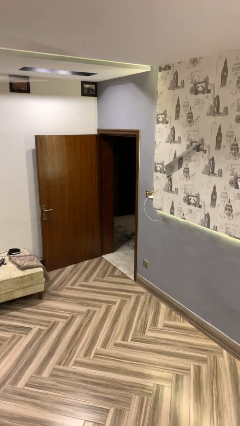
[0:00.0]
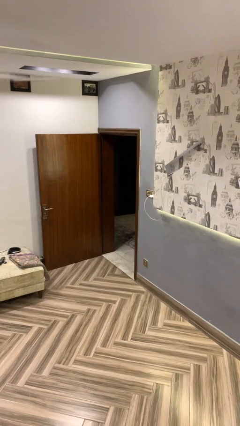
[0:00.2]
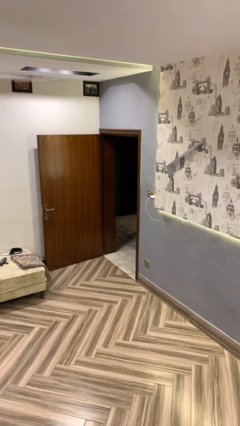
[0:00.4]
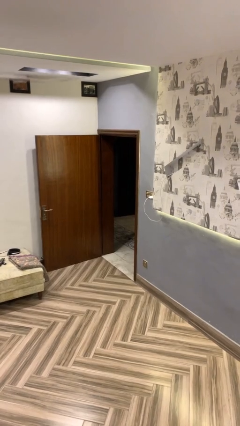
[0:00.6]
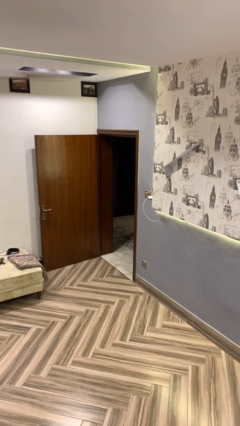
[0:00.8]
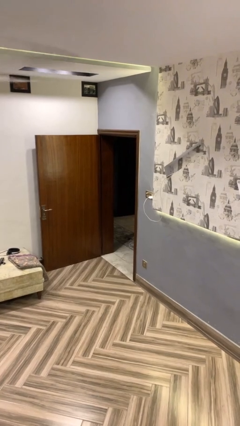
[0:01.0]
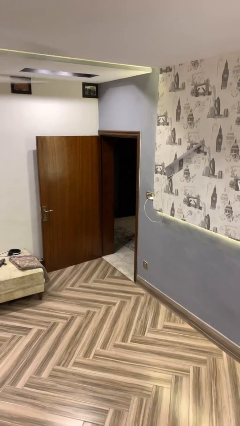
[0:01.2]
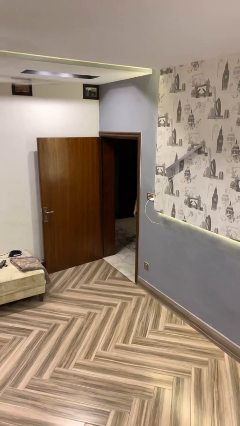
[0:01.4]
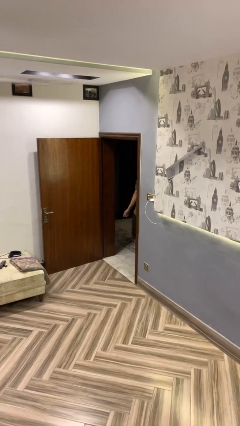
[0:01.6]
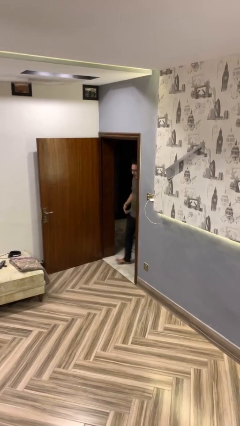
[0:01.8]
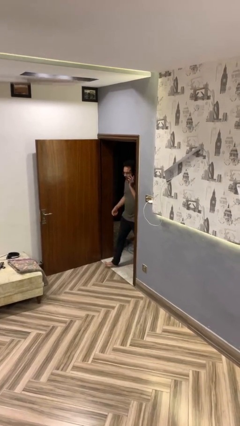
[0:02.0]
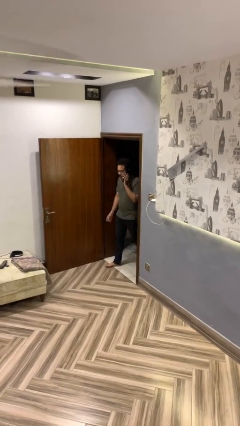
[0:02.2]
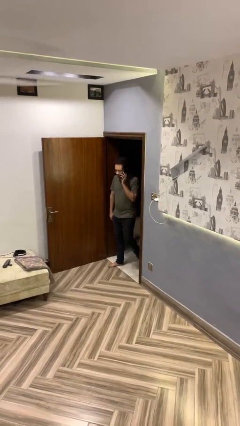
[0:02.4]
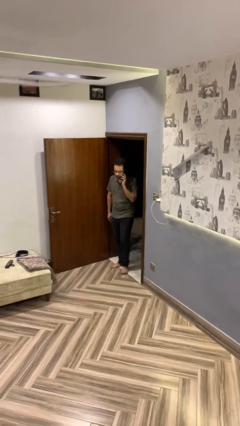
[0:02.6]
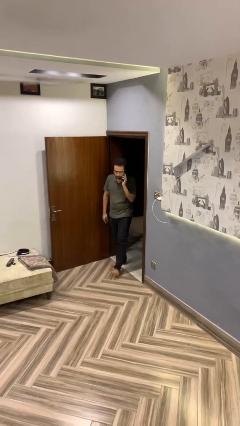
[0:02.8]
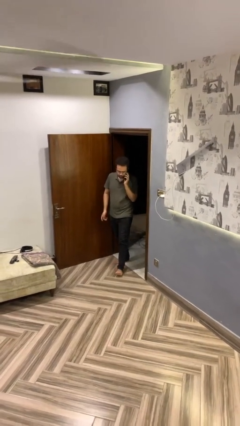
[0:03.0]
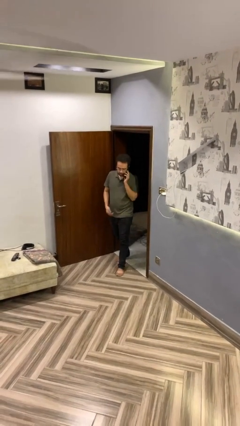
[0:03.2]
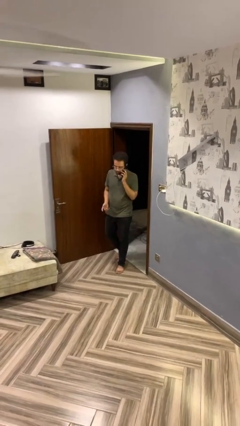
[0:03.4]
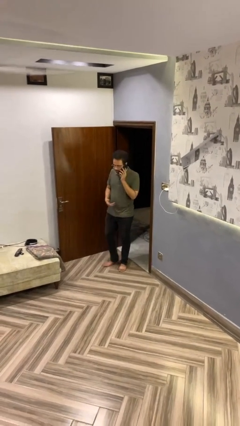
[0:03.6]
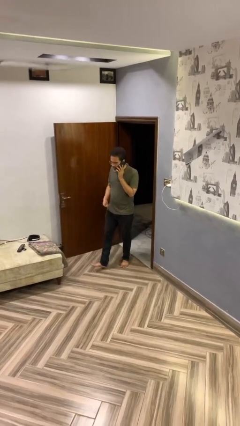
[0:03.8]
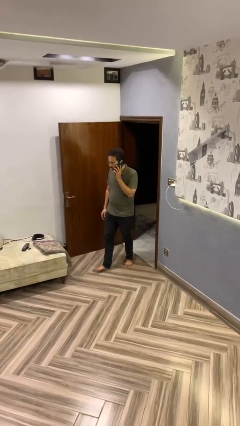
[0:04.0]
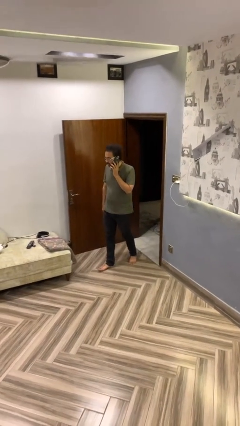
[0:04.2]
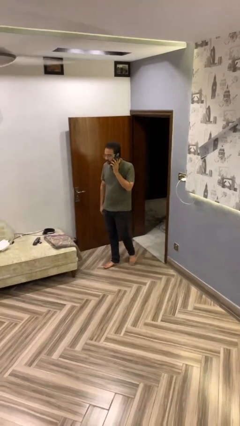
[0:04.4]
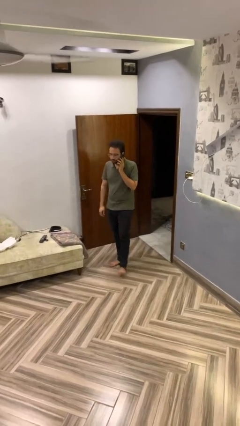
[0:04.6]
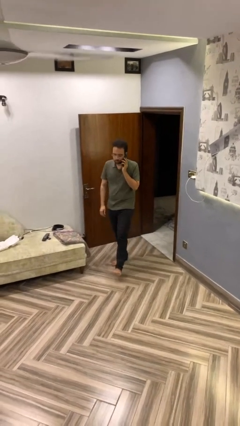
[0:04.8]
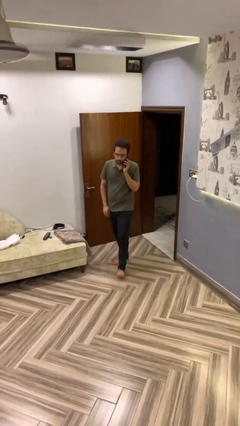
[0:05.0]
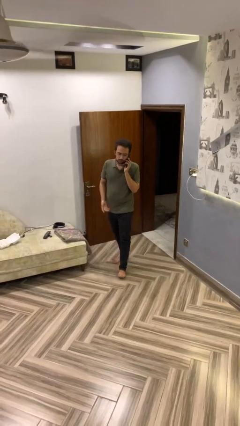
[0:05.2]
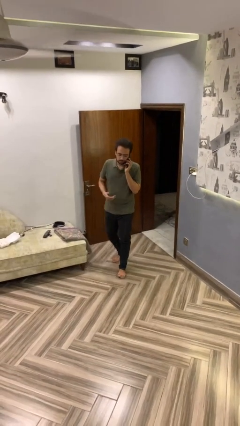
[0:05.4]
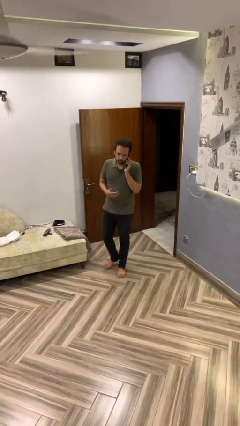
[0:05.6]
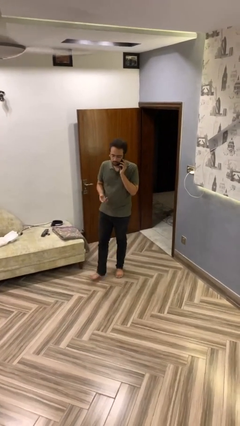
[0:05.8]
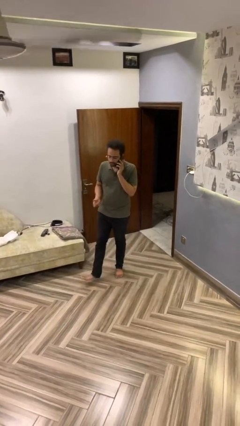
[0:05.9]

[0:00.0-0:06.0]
person enters scene through structure

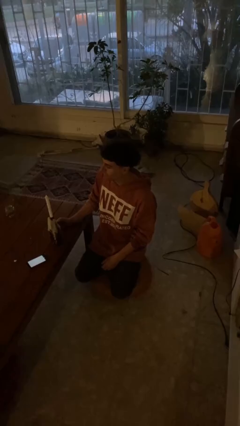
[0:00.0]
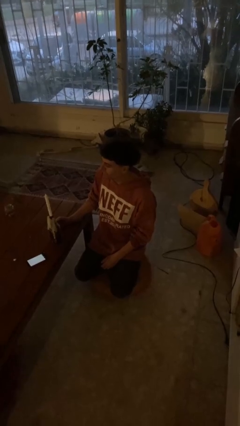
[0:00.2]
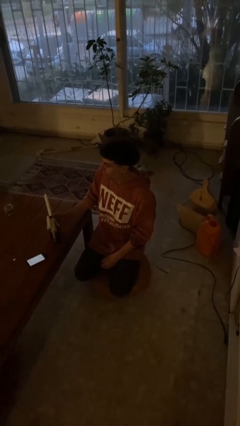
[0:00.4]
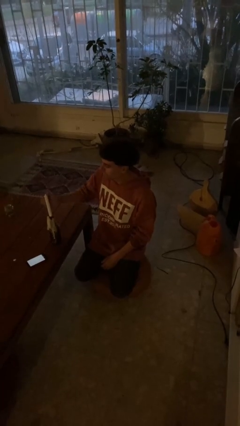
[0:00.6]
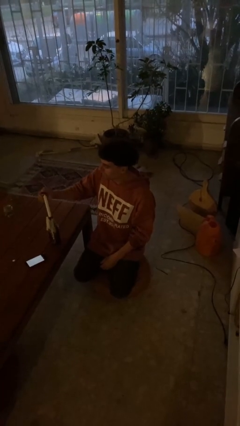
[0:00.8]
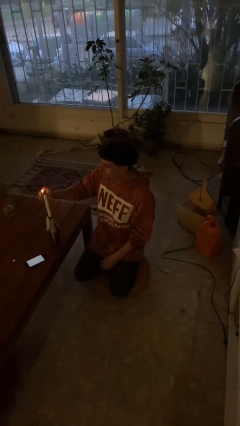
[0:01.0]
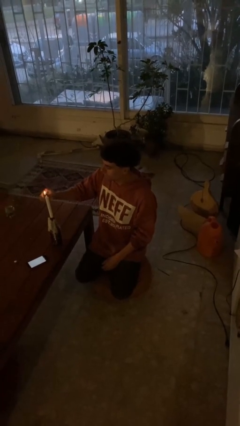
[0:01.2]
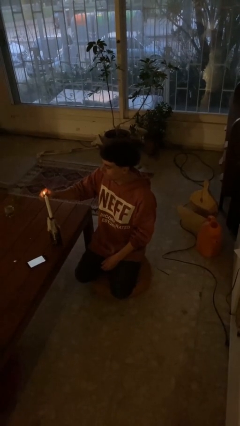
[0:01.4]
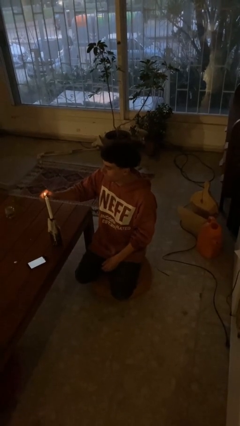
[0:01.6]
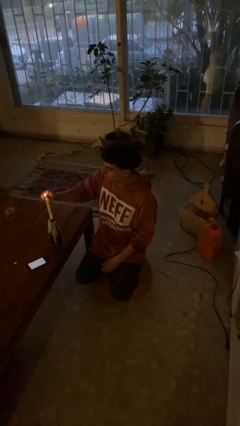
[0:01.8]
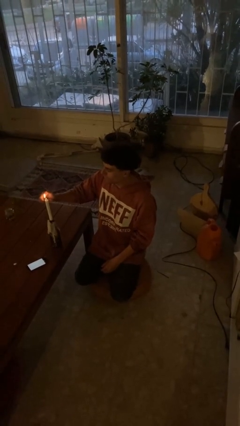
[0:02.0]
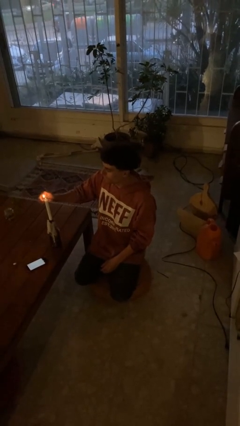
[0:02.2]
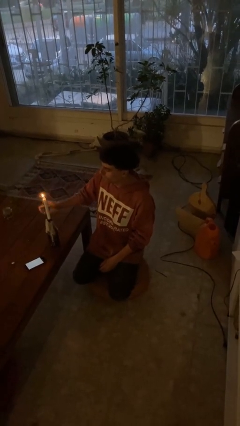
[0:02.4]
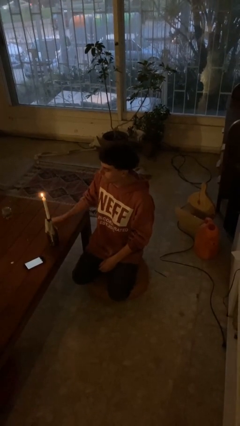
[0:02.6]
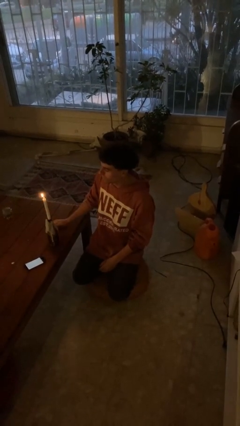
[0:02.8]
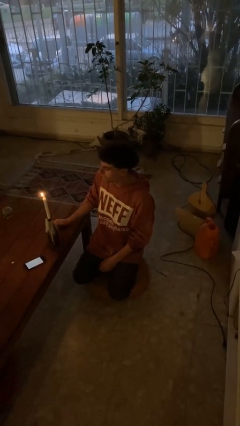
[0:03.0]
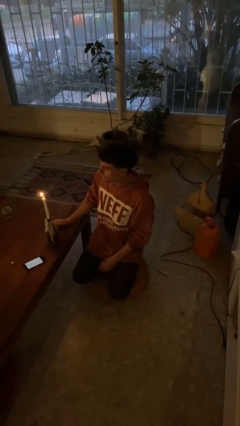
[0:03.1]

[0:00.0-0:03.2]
person lights candle

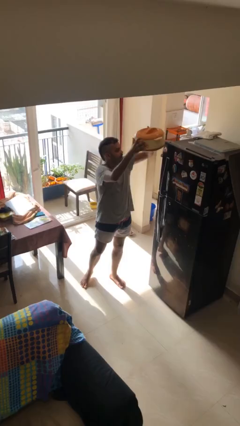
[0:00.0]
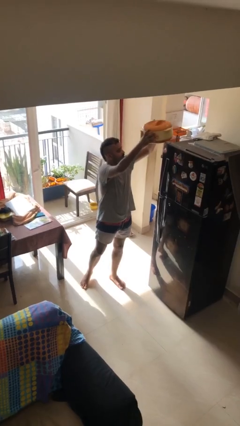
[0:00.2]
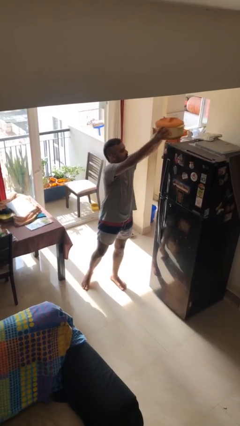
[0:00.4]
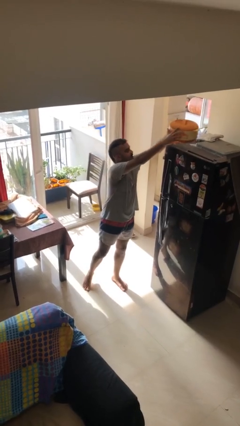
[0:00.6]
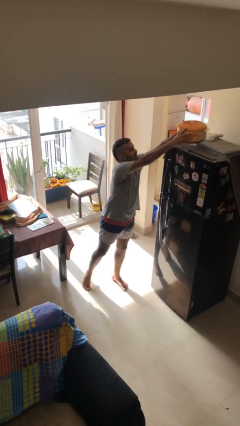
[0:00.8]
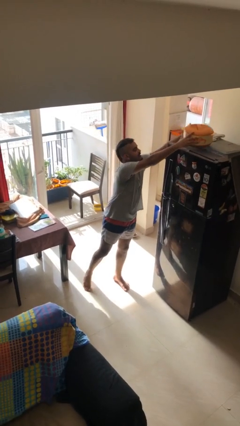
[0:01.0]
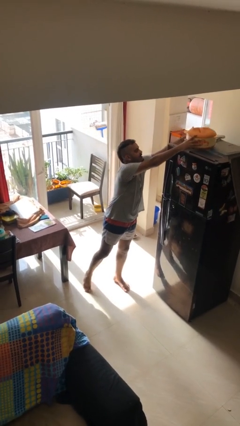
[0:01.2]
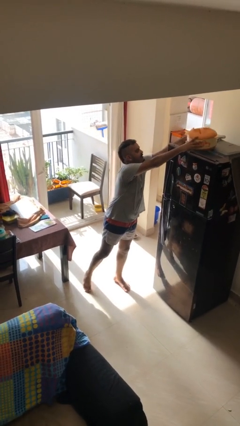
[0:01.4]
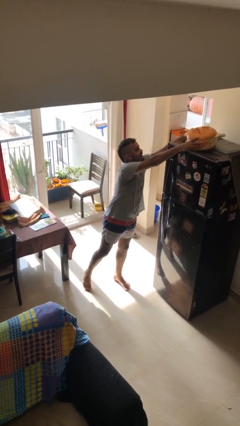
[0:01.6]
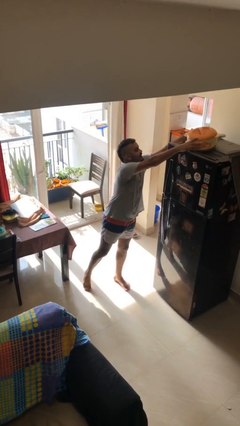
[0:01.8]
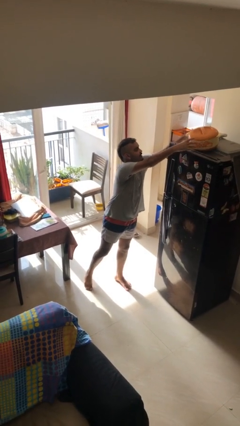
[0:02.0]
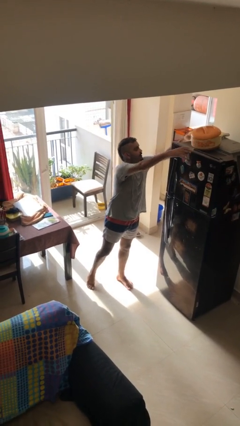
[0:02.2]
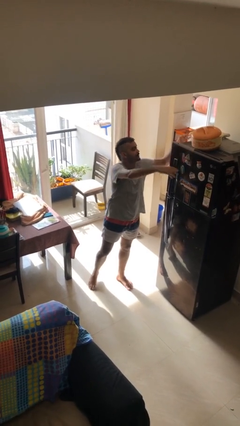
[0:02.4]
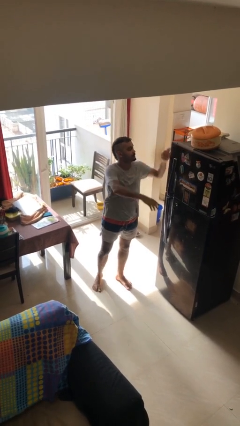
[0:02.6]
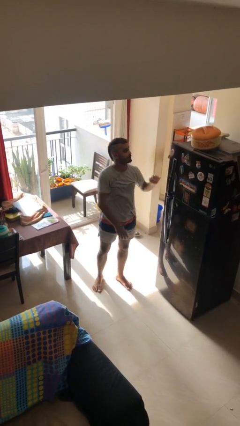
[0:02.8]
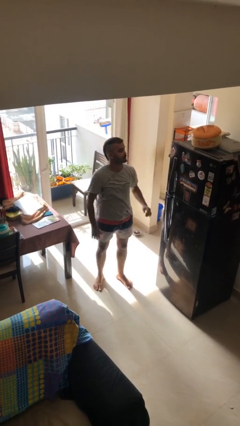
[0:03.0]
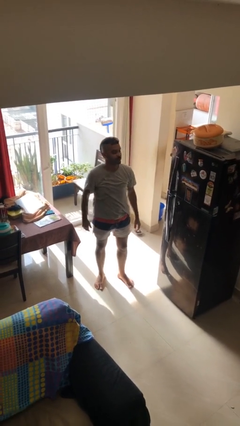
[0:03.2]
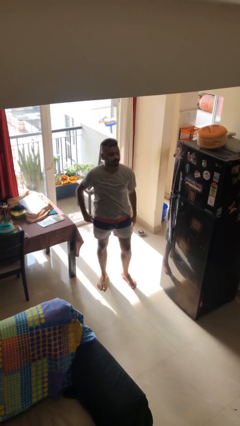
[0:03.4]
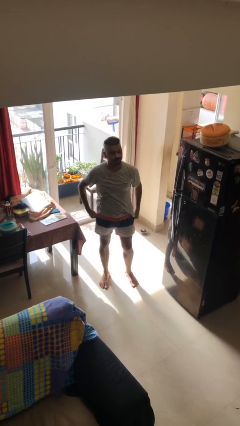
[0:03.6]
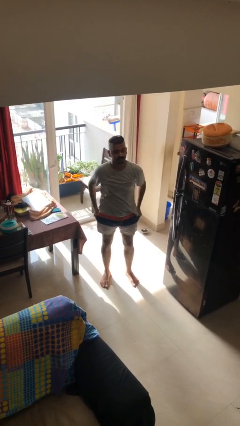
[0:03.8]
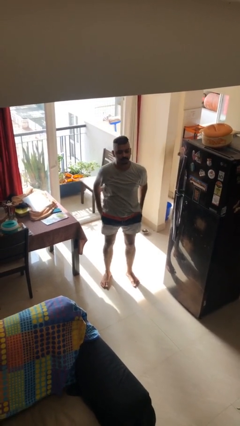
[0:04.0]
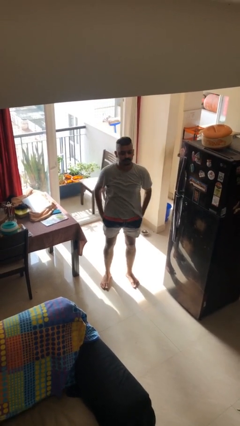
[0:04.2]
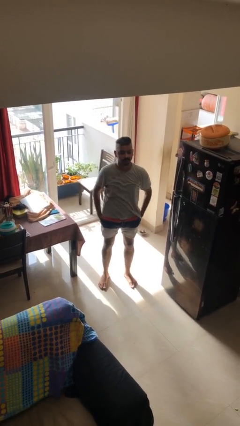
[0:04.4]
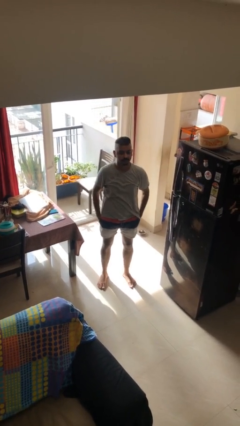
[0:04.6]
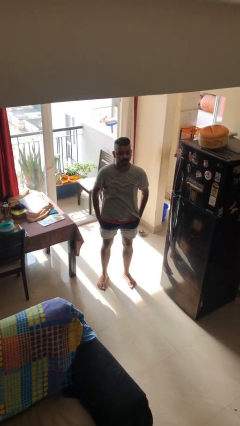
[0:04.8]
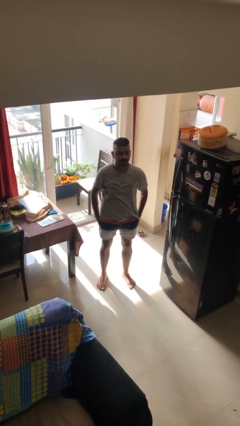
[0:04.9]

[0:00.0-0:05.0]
person puts down object on shelf

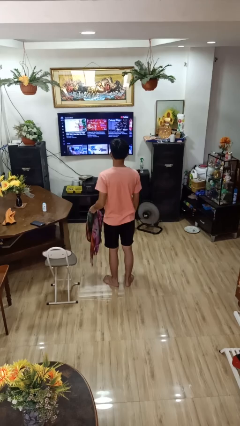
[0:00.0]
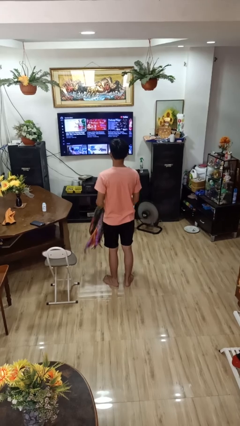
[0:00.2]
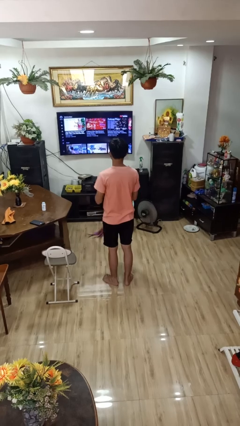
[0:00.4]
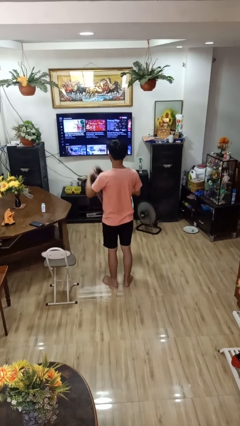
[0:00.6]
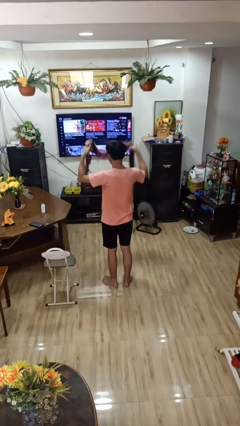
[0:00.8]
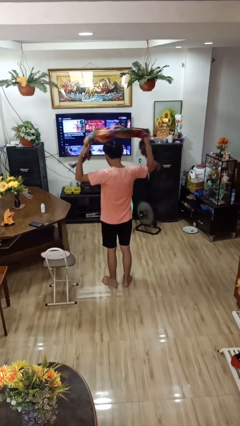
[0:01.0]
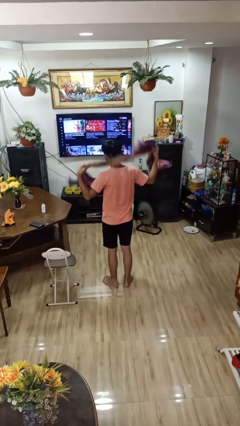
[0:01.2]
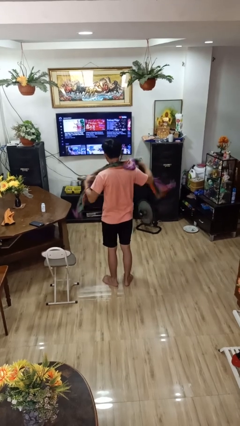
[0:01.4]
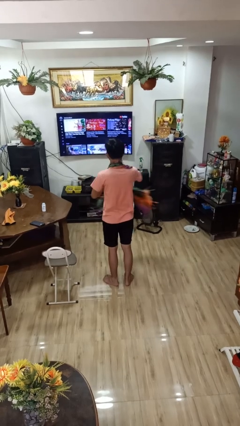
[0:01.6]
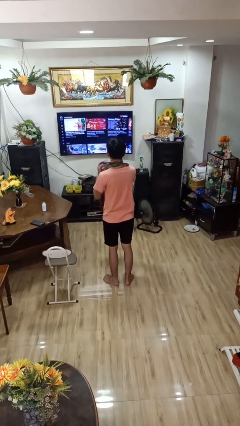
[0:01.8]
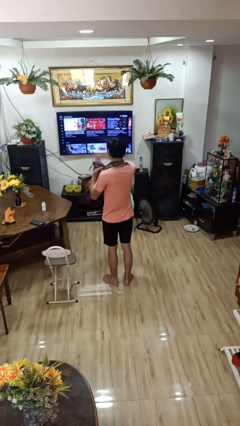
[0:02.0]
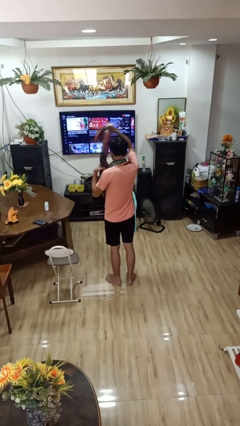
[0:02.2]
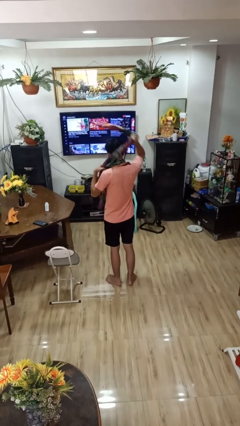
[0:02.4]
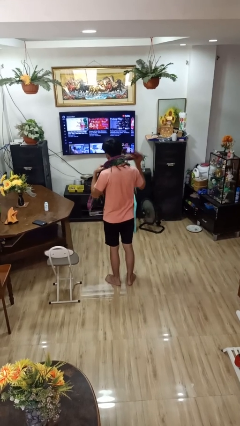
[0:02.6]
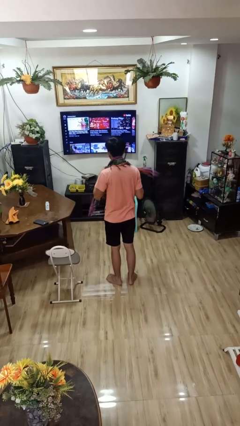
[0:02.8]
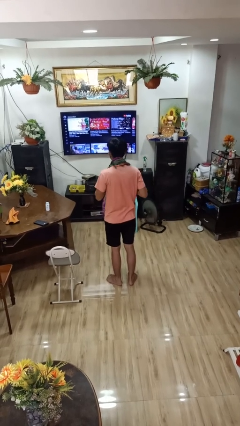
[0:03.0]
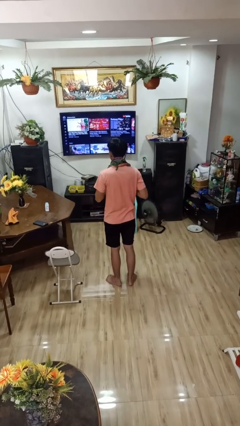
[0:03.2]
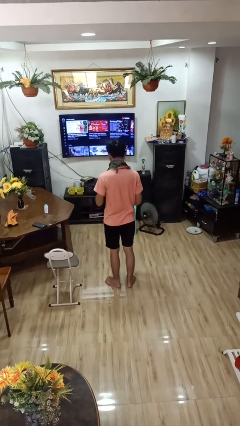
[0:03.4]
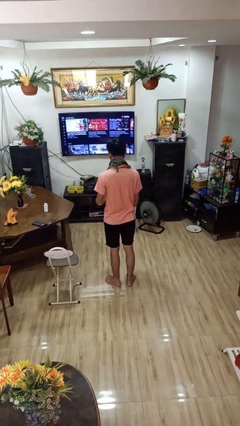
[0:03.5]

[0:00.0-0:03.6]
person puts on scarf

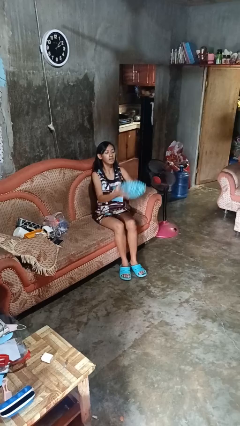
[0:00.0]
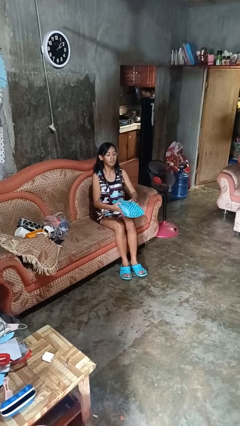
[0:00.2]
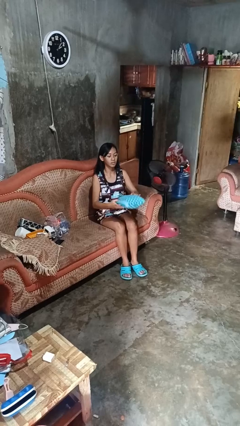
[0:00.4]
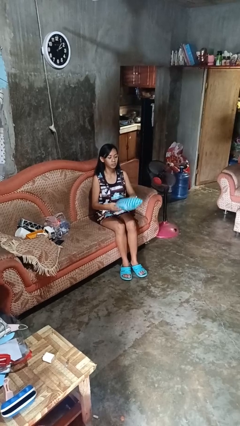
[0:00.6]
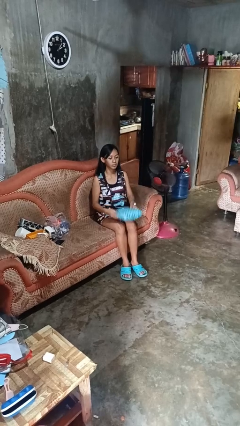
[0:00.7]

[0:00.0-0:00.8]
person catches dropped object
